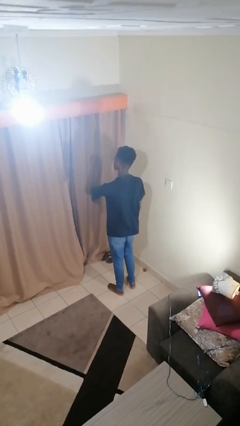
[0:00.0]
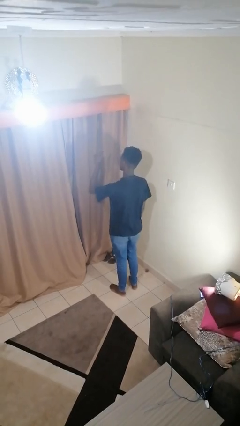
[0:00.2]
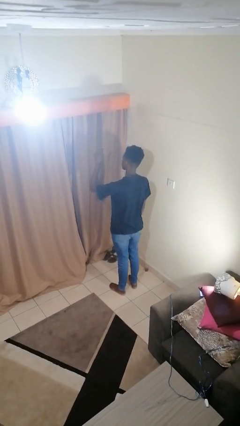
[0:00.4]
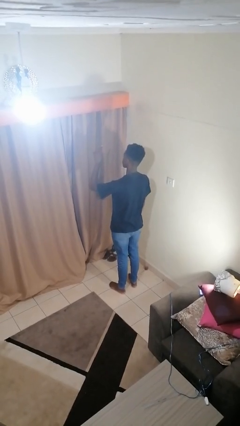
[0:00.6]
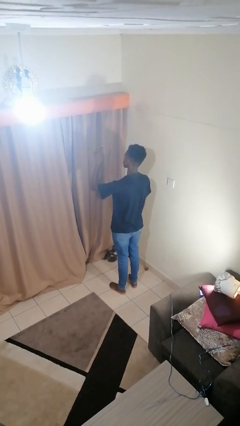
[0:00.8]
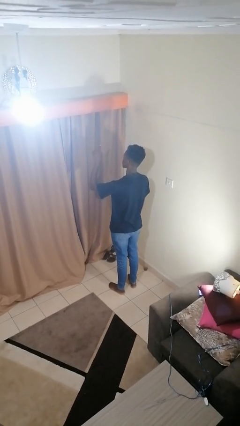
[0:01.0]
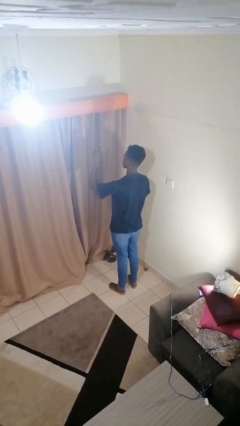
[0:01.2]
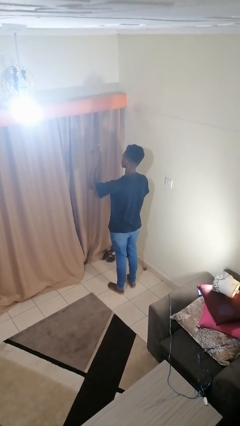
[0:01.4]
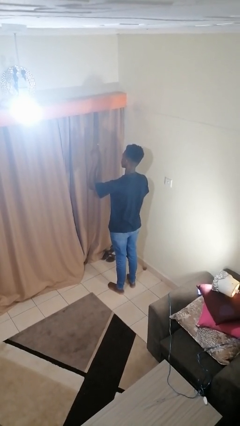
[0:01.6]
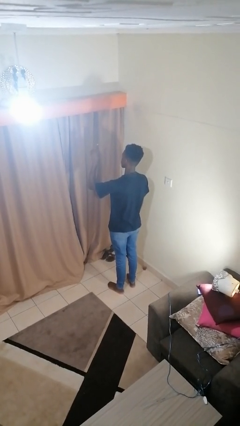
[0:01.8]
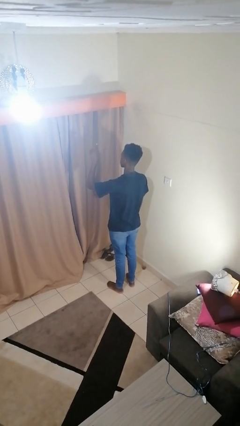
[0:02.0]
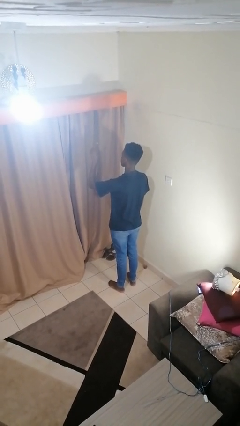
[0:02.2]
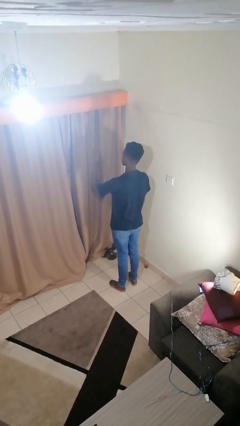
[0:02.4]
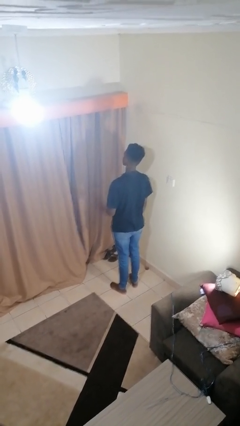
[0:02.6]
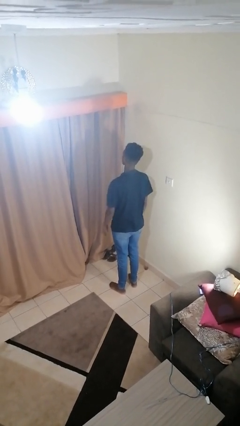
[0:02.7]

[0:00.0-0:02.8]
person gestures number one

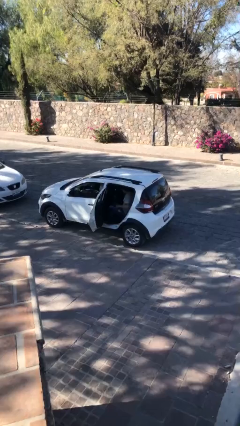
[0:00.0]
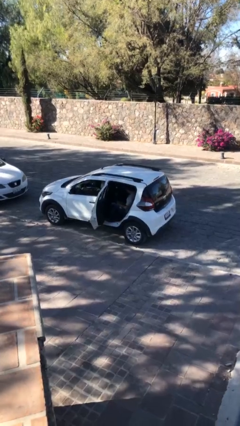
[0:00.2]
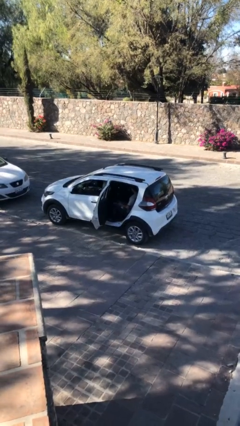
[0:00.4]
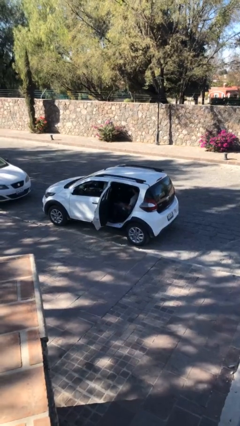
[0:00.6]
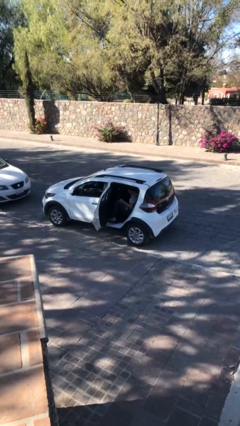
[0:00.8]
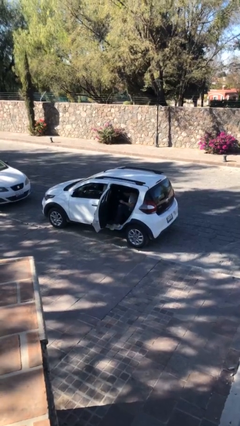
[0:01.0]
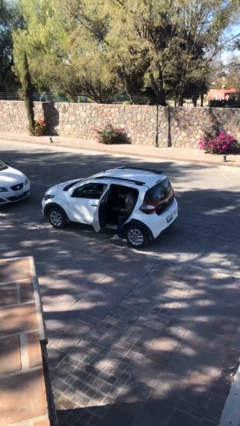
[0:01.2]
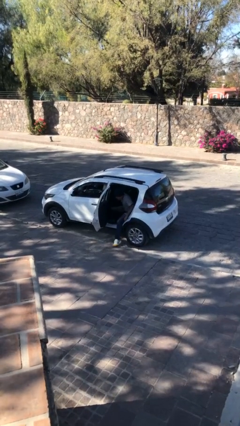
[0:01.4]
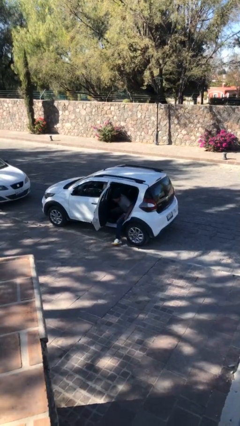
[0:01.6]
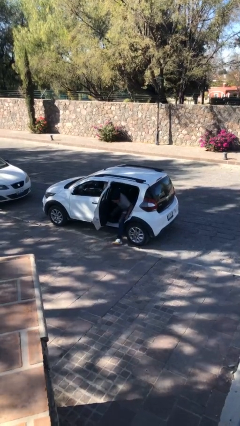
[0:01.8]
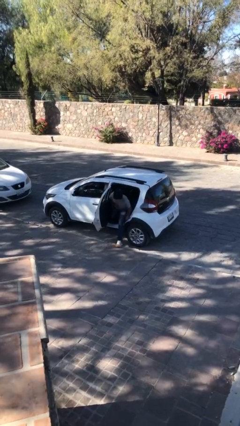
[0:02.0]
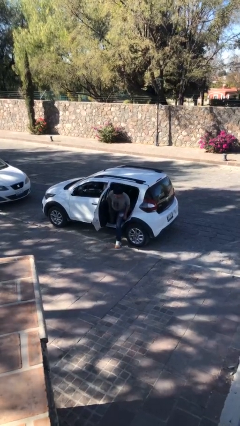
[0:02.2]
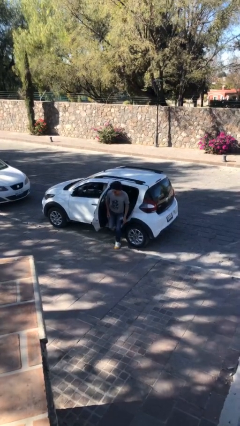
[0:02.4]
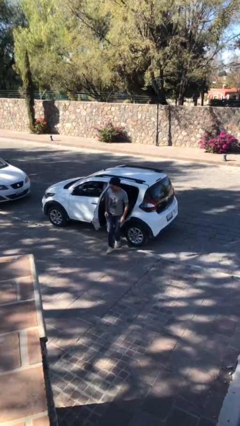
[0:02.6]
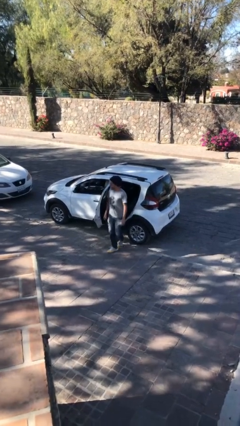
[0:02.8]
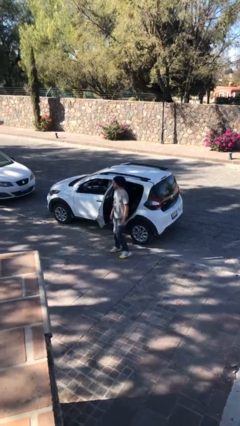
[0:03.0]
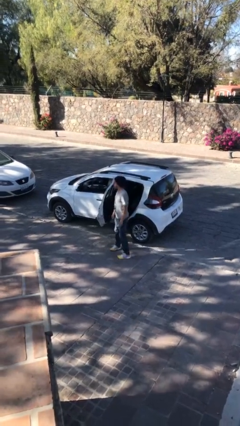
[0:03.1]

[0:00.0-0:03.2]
person exits car

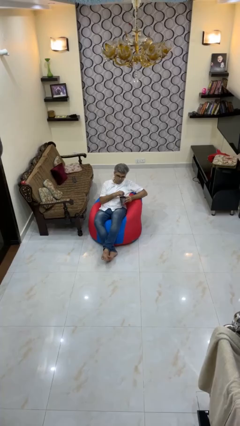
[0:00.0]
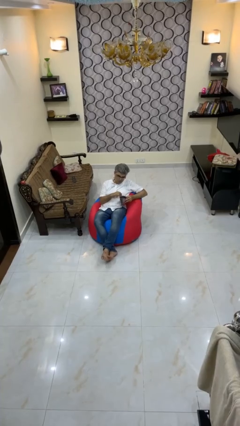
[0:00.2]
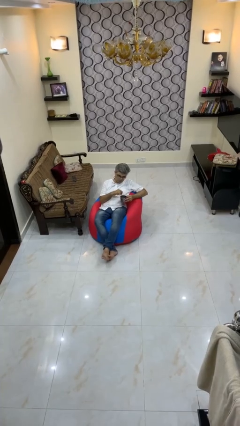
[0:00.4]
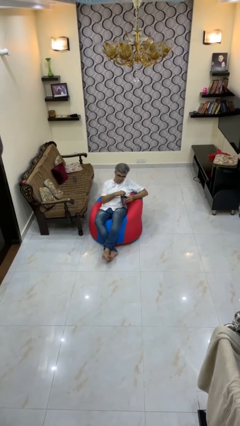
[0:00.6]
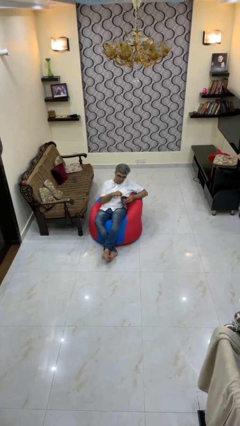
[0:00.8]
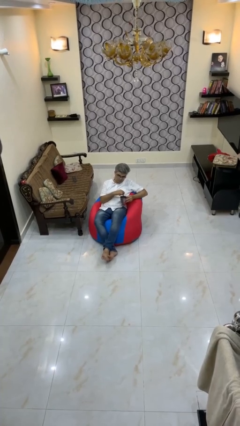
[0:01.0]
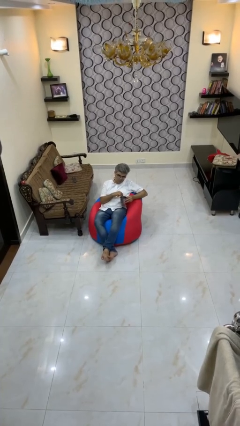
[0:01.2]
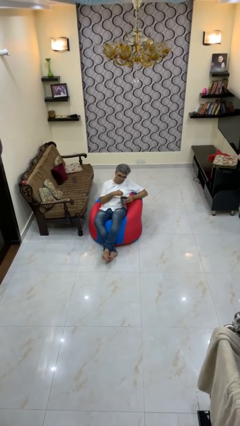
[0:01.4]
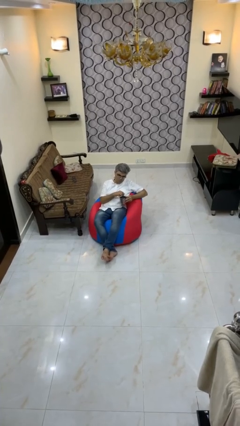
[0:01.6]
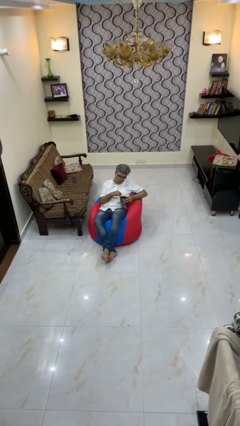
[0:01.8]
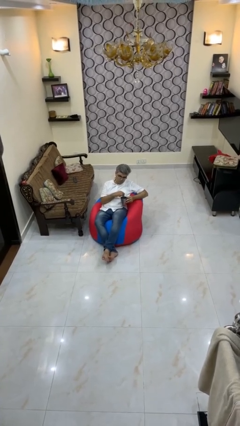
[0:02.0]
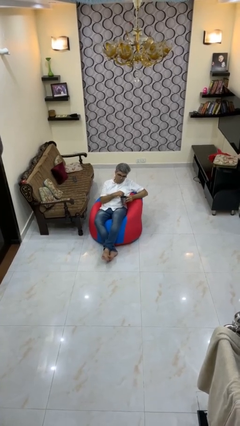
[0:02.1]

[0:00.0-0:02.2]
person stirs mug

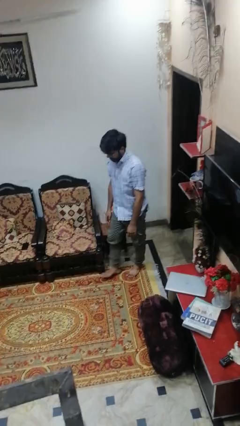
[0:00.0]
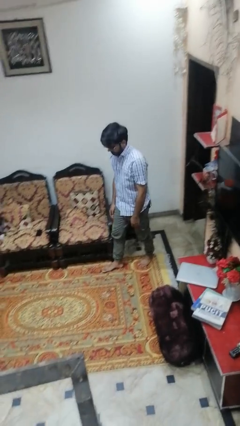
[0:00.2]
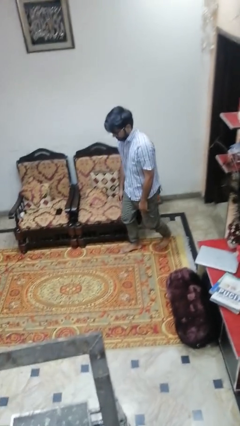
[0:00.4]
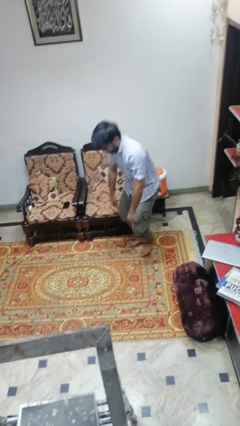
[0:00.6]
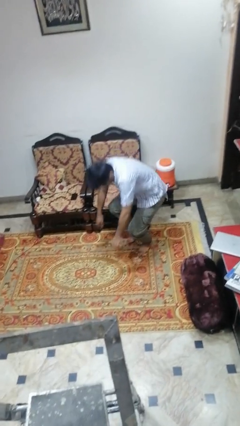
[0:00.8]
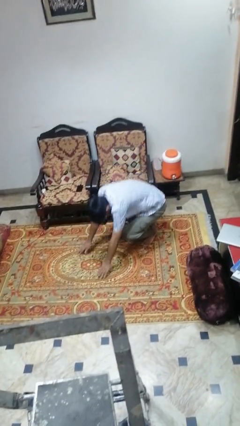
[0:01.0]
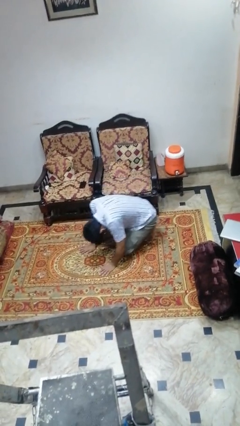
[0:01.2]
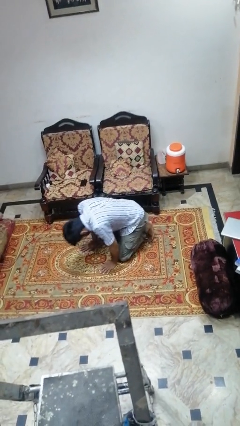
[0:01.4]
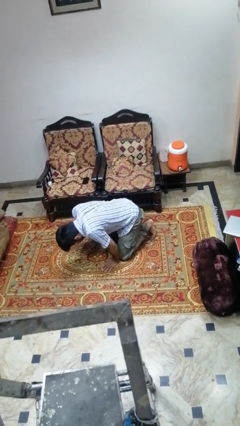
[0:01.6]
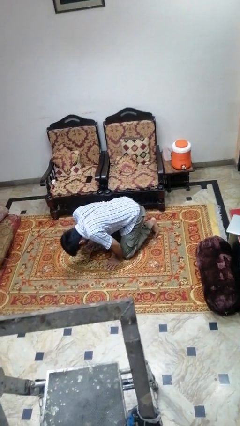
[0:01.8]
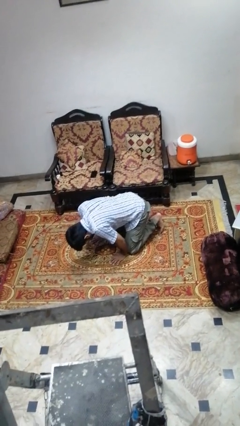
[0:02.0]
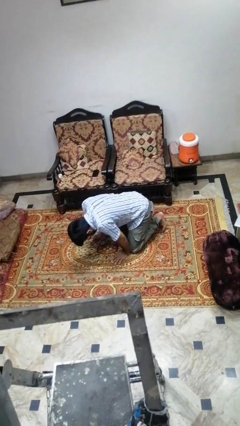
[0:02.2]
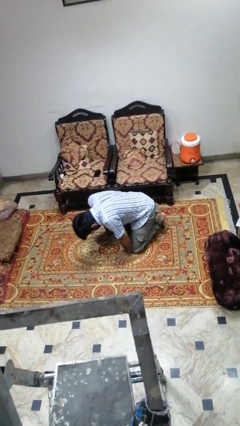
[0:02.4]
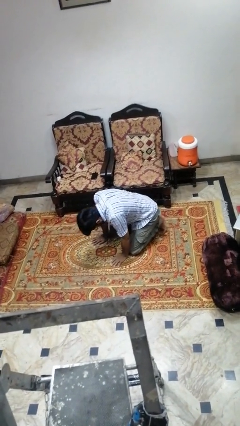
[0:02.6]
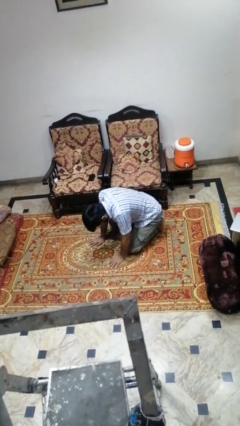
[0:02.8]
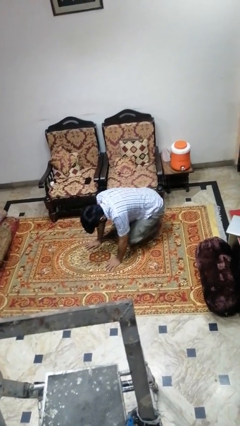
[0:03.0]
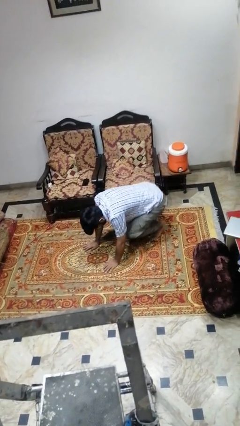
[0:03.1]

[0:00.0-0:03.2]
person trips on object on floor

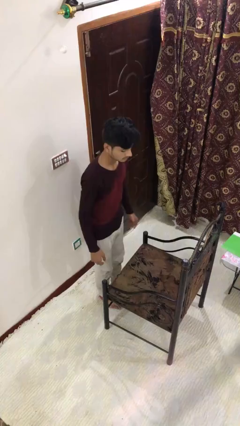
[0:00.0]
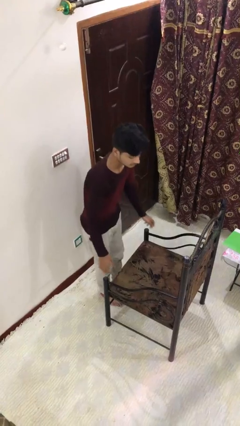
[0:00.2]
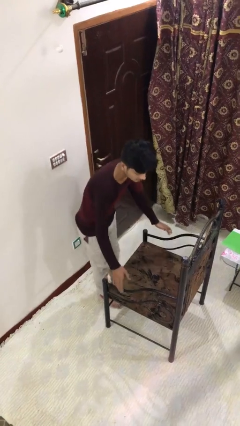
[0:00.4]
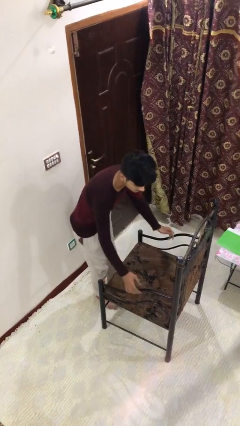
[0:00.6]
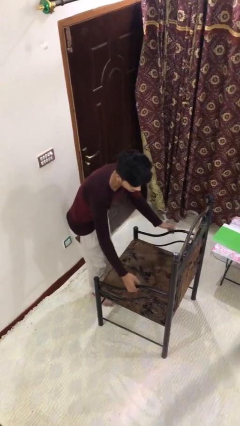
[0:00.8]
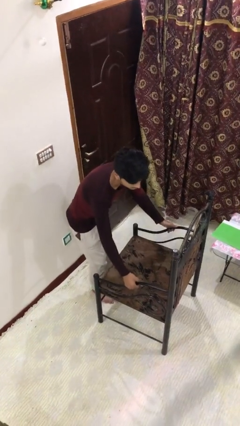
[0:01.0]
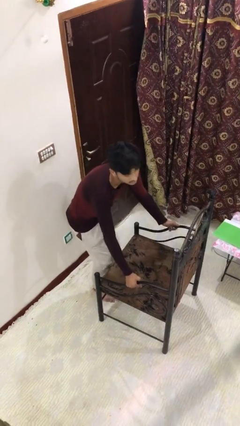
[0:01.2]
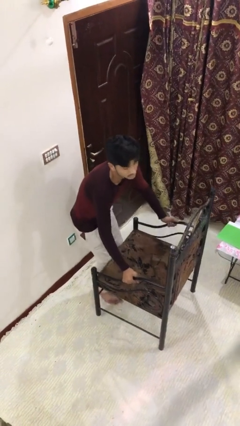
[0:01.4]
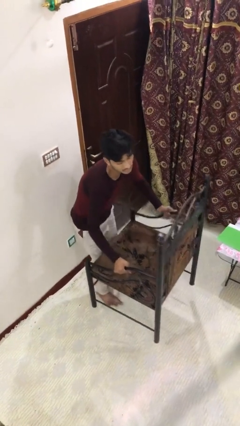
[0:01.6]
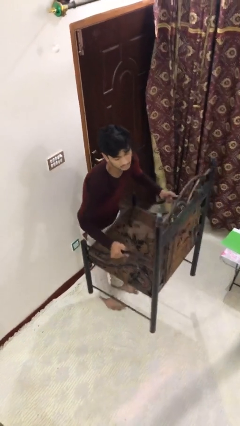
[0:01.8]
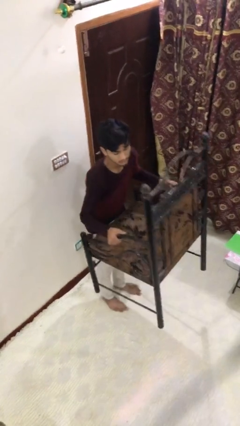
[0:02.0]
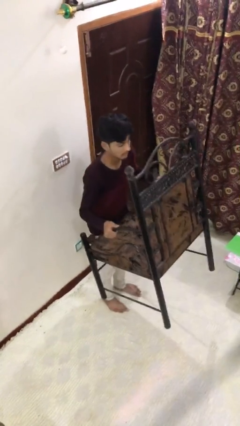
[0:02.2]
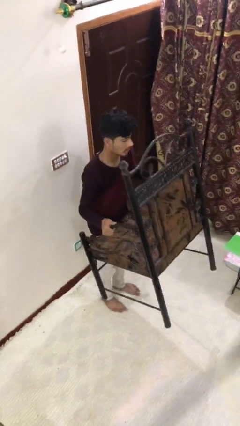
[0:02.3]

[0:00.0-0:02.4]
person picks up object from floor

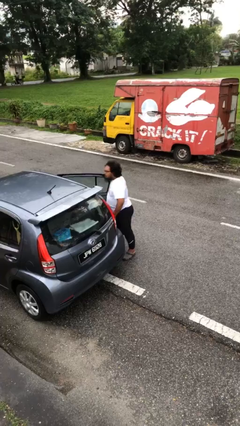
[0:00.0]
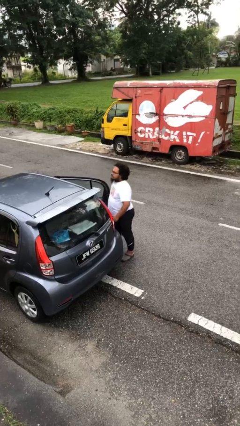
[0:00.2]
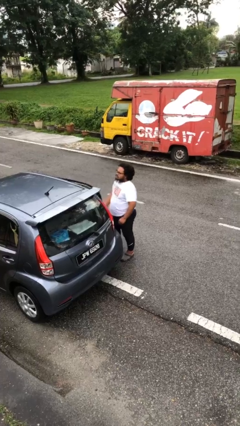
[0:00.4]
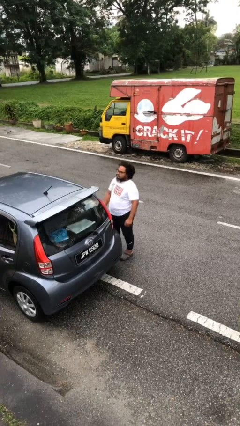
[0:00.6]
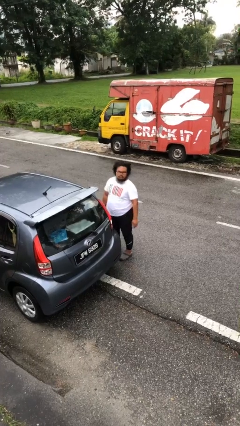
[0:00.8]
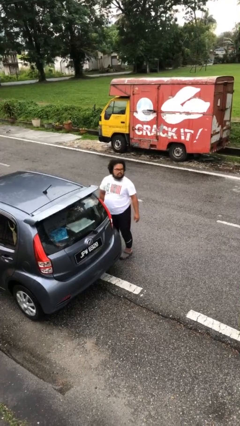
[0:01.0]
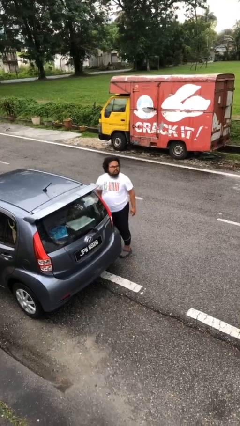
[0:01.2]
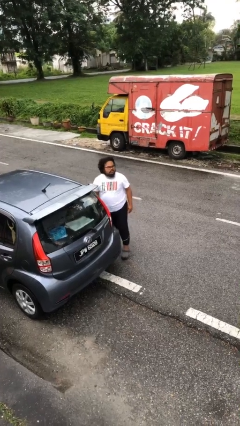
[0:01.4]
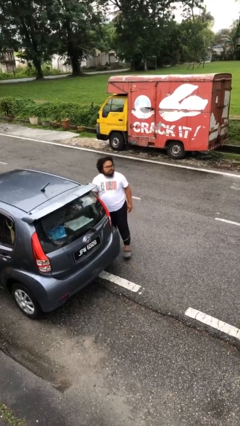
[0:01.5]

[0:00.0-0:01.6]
person closes car door

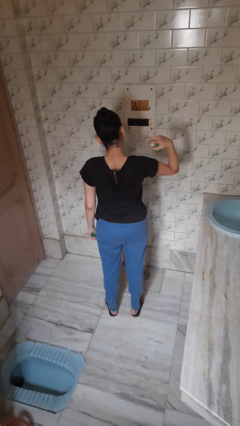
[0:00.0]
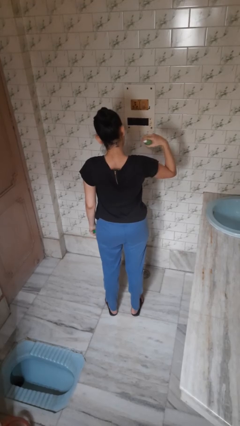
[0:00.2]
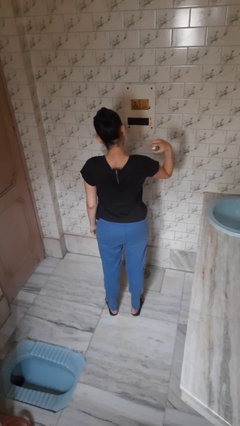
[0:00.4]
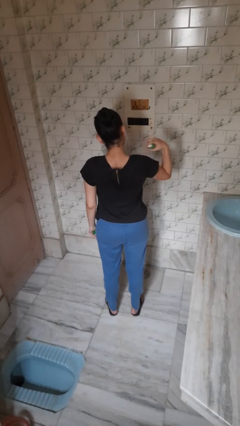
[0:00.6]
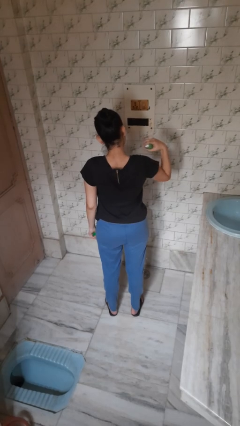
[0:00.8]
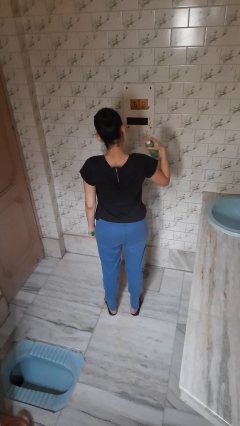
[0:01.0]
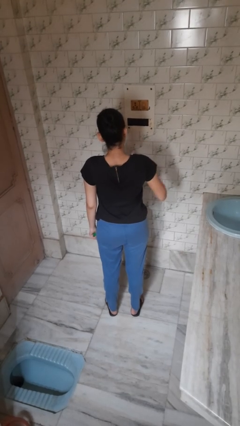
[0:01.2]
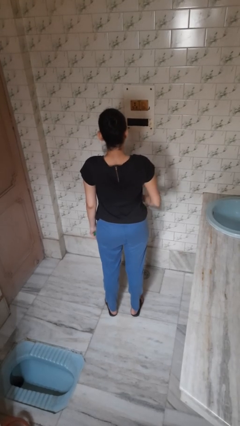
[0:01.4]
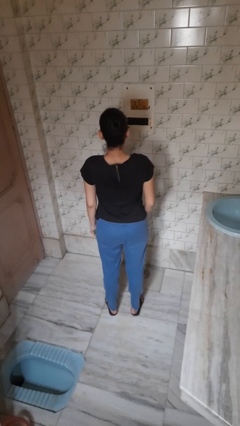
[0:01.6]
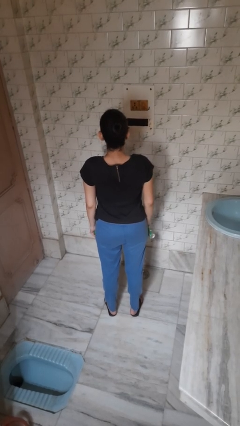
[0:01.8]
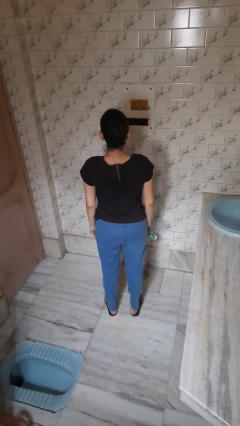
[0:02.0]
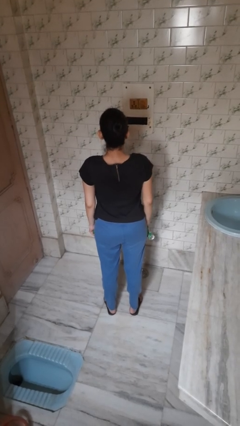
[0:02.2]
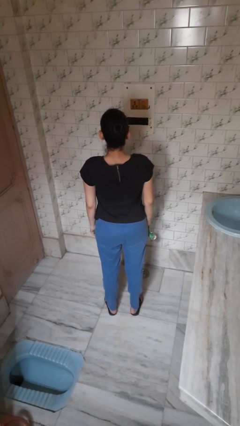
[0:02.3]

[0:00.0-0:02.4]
person applies deodorant
